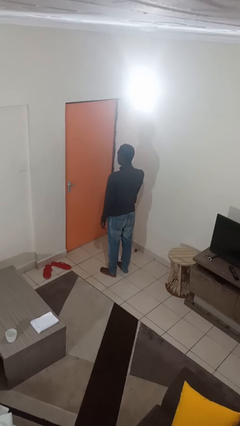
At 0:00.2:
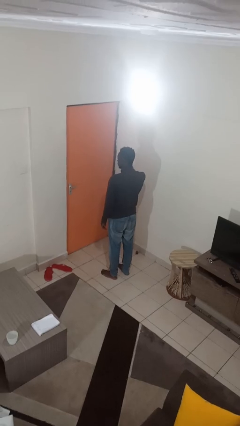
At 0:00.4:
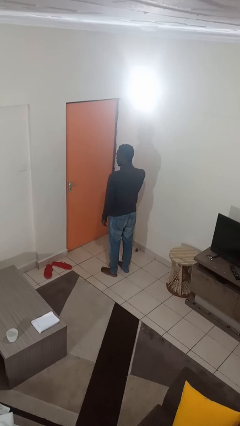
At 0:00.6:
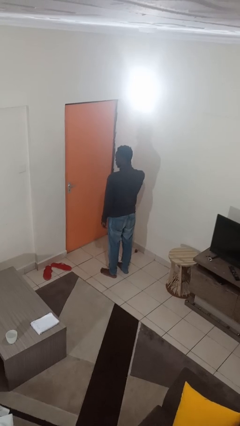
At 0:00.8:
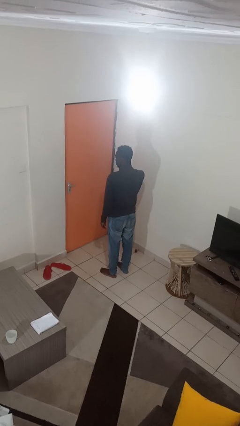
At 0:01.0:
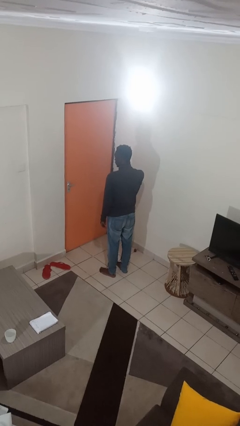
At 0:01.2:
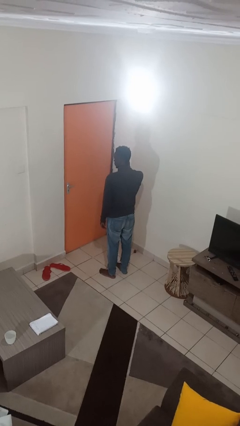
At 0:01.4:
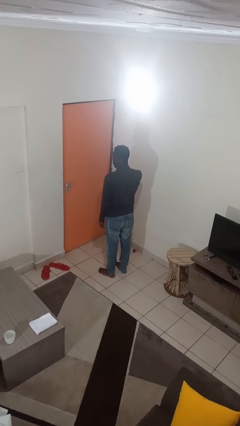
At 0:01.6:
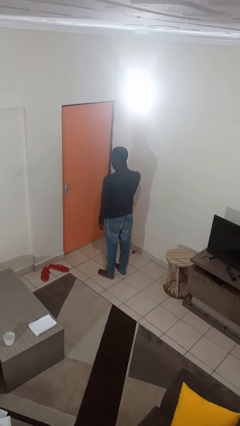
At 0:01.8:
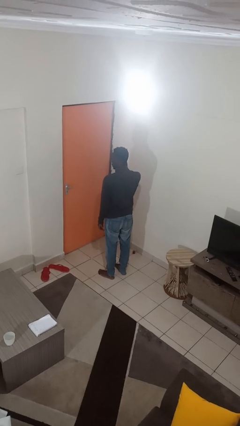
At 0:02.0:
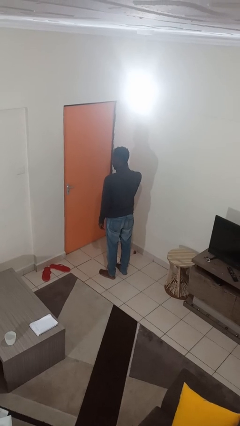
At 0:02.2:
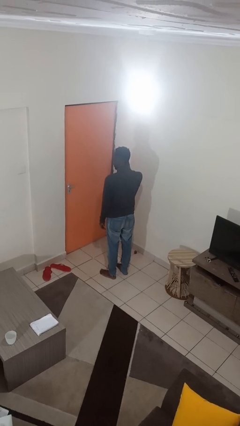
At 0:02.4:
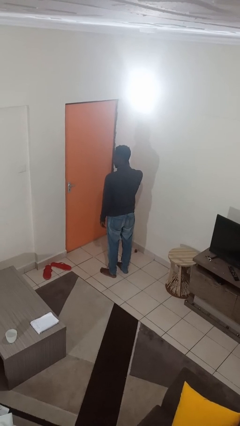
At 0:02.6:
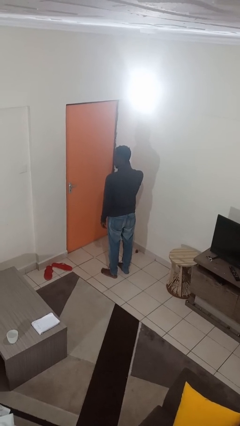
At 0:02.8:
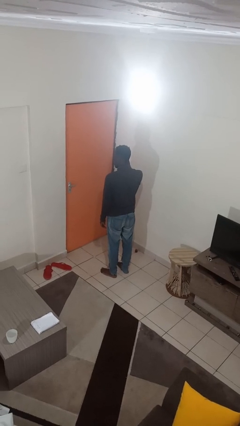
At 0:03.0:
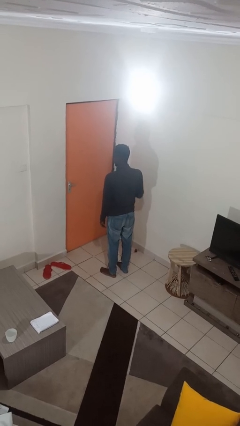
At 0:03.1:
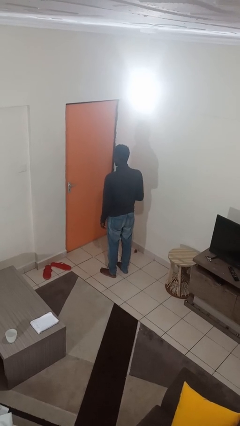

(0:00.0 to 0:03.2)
person touches earlobe

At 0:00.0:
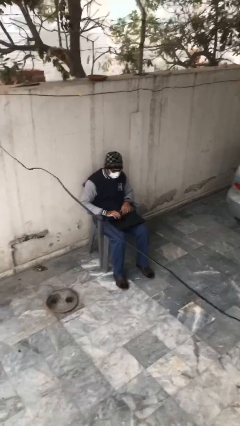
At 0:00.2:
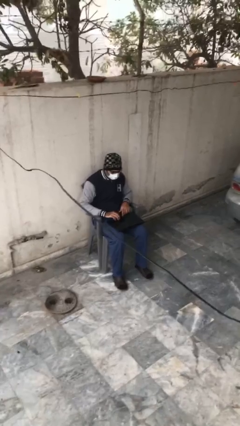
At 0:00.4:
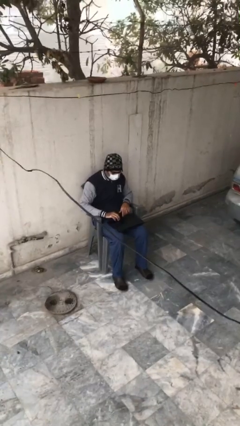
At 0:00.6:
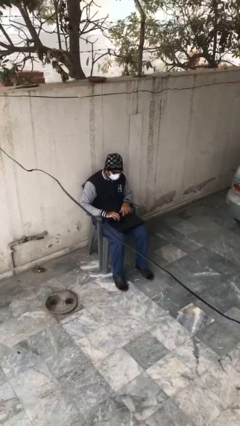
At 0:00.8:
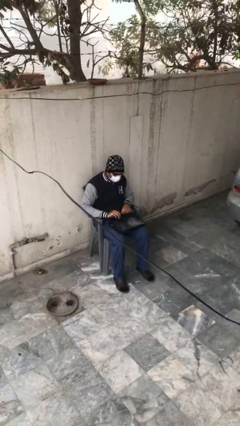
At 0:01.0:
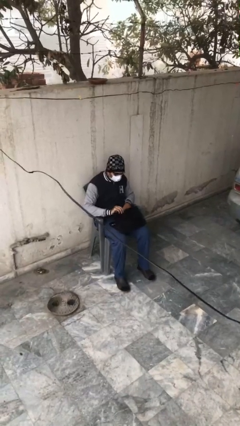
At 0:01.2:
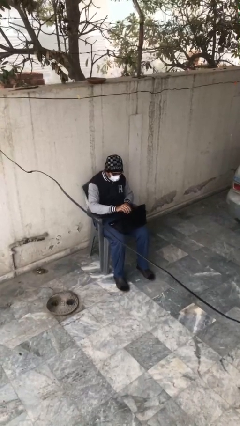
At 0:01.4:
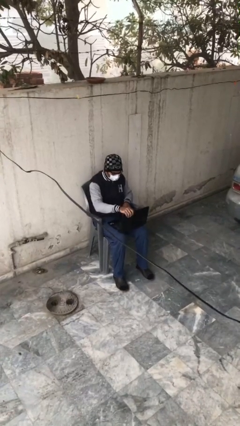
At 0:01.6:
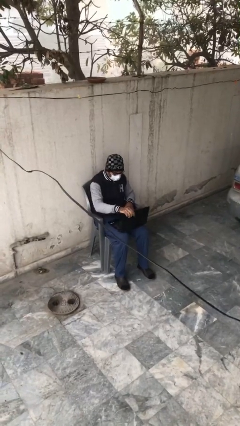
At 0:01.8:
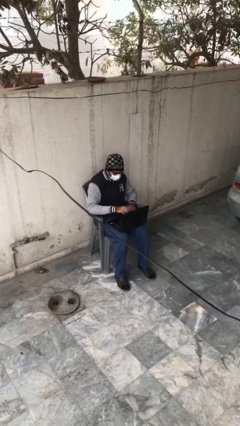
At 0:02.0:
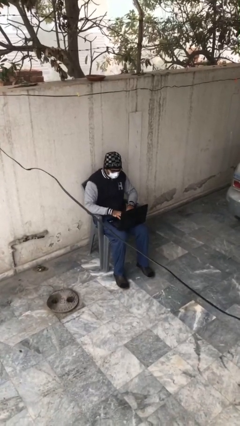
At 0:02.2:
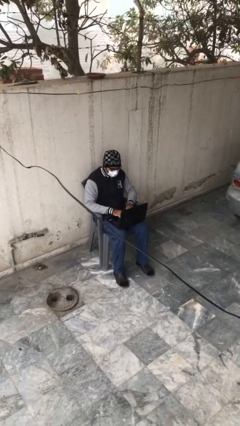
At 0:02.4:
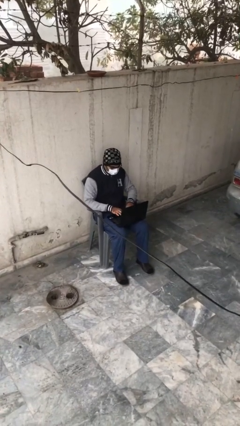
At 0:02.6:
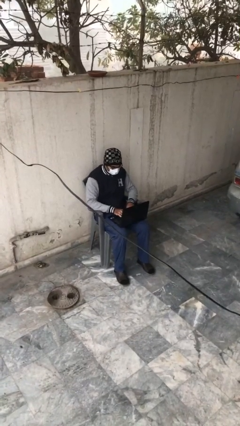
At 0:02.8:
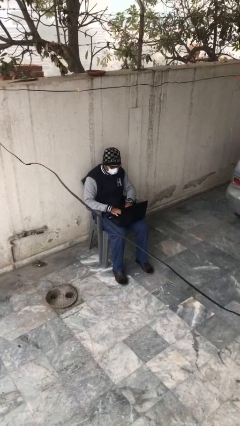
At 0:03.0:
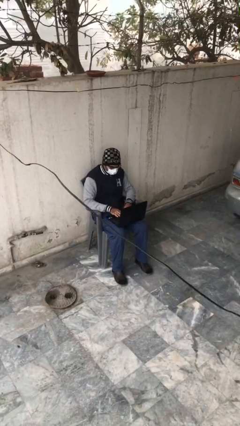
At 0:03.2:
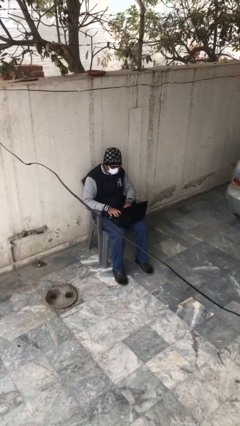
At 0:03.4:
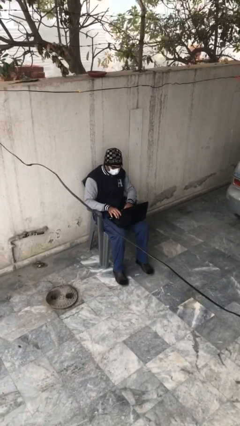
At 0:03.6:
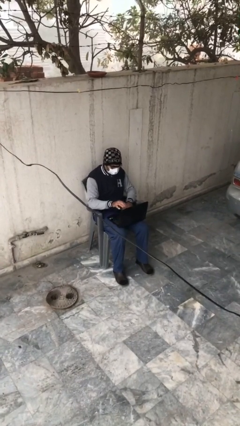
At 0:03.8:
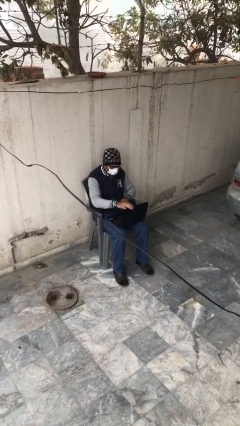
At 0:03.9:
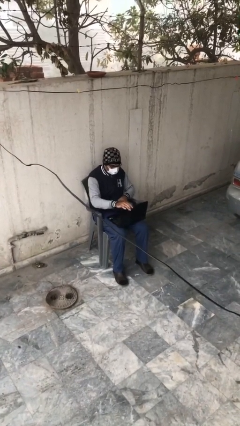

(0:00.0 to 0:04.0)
person interacts with laptop

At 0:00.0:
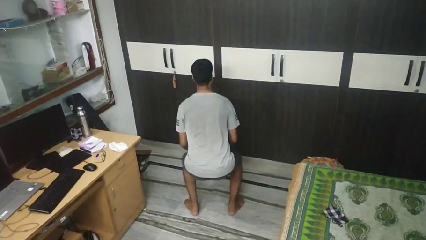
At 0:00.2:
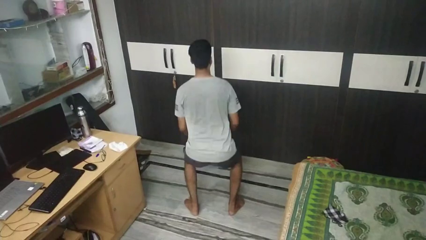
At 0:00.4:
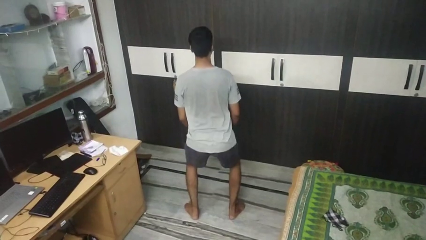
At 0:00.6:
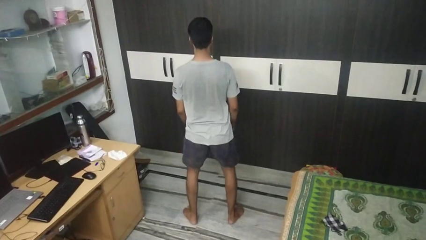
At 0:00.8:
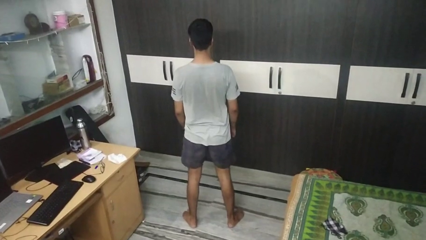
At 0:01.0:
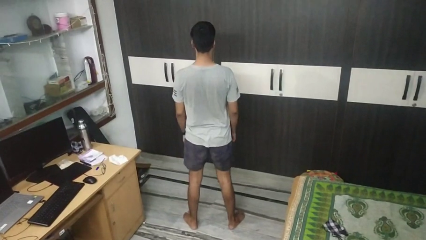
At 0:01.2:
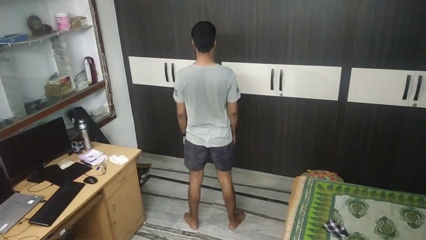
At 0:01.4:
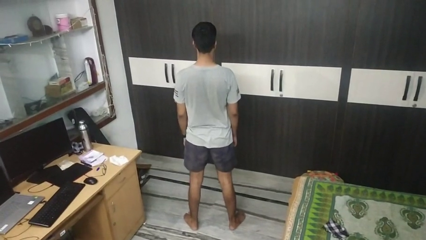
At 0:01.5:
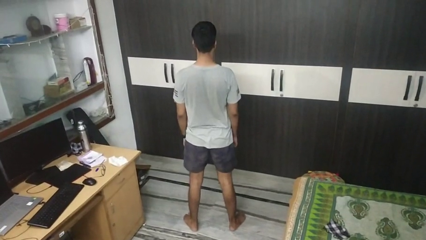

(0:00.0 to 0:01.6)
person stands up

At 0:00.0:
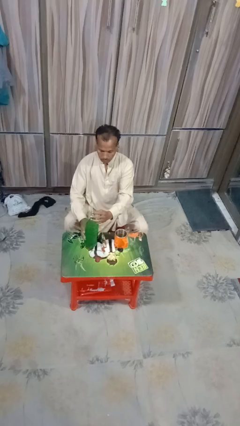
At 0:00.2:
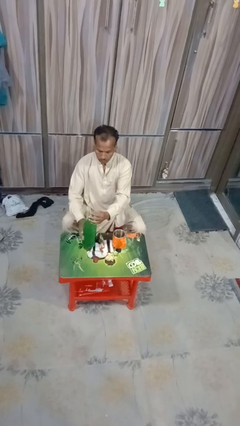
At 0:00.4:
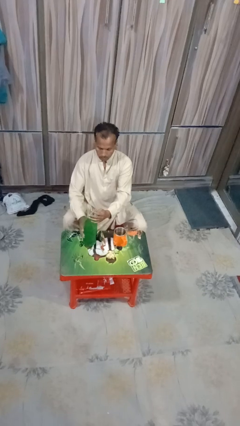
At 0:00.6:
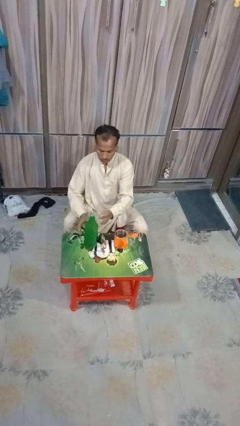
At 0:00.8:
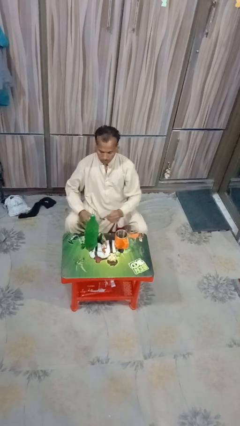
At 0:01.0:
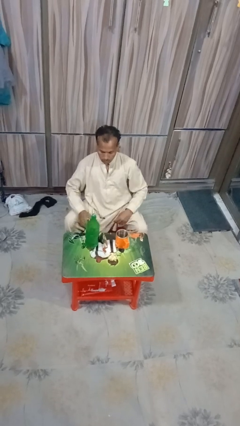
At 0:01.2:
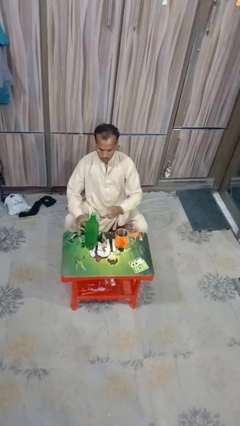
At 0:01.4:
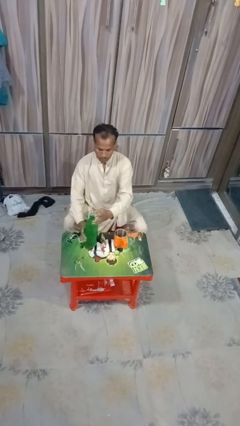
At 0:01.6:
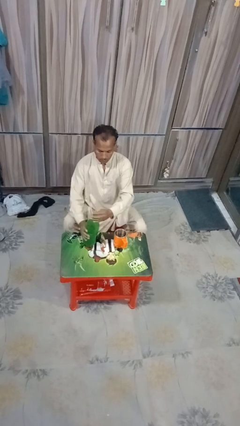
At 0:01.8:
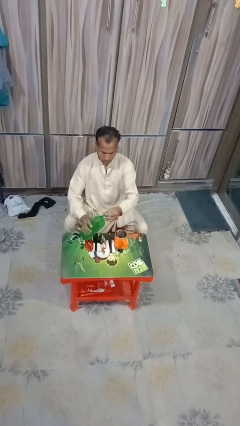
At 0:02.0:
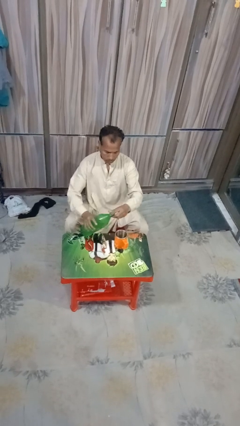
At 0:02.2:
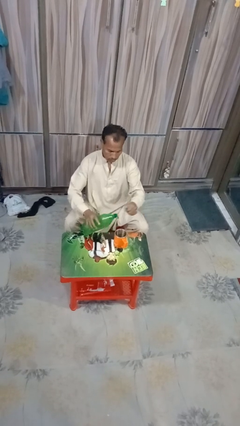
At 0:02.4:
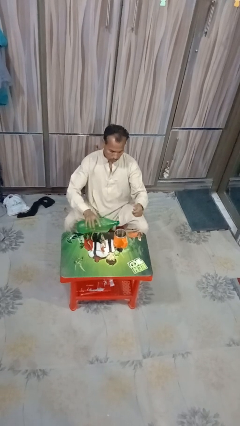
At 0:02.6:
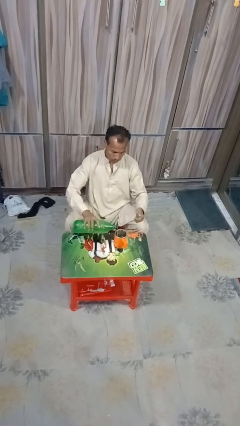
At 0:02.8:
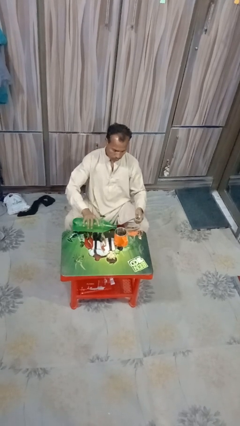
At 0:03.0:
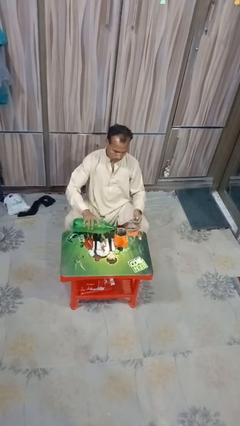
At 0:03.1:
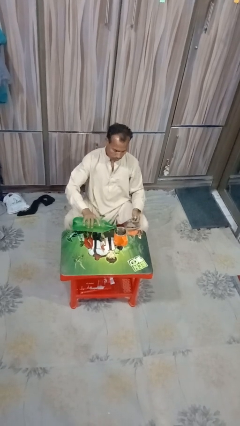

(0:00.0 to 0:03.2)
person pours liquid into cup

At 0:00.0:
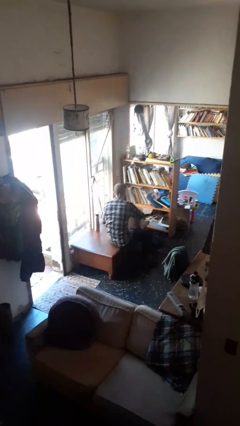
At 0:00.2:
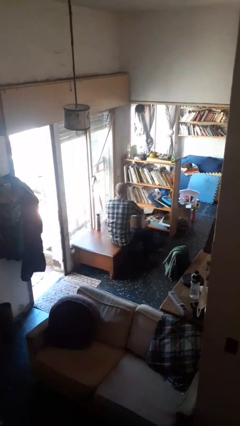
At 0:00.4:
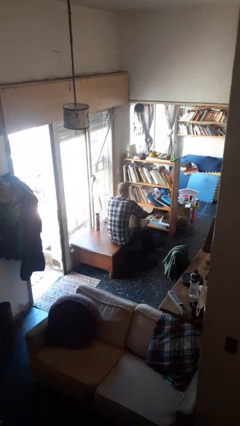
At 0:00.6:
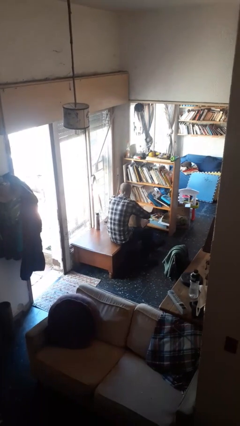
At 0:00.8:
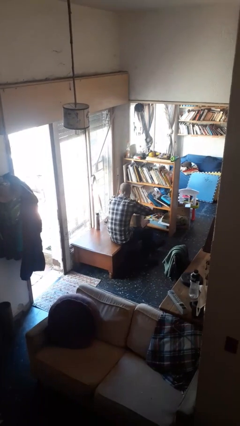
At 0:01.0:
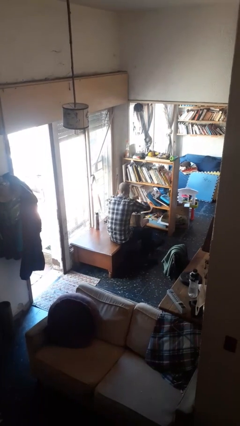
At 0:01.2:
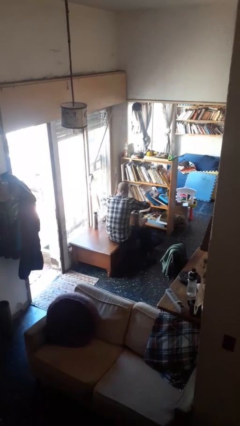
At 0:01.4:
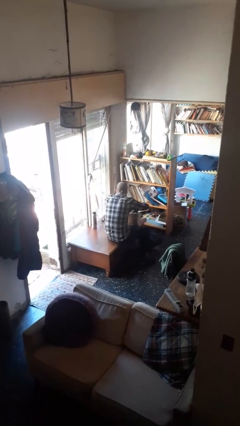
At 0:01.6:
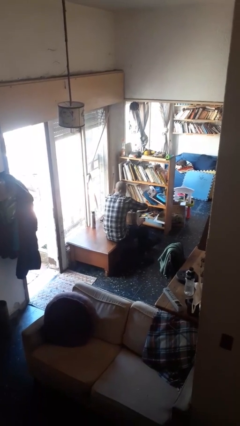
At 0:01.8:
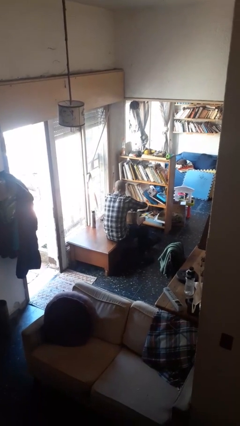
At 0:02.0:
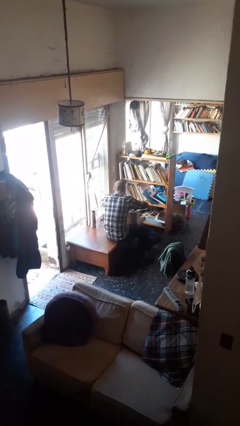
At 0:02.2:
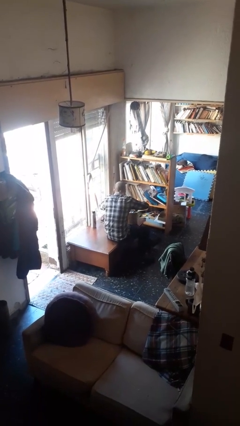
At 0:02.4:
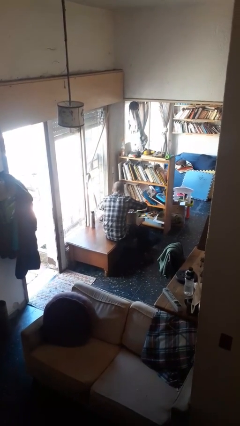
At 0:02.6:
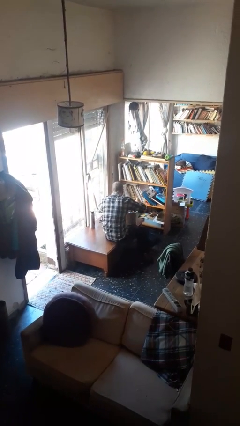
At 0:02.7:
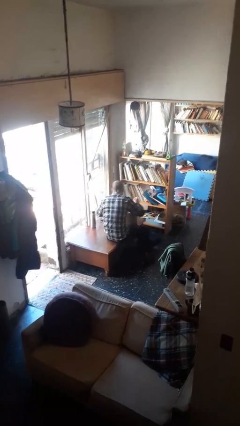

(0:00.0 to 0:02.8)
person searches in box

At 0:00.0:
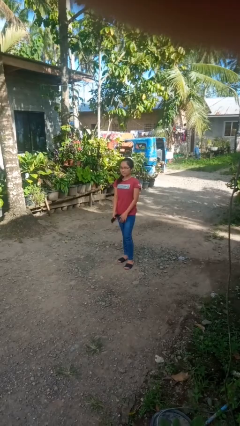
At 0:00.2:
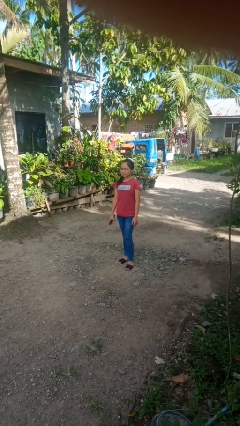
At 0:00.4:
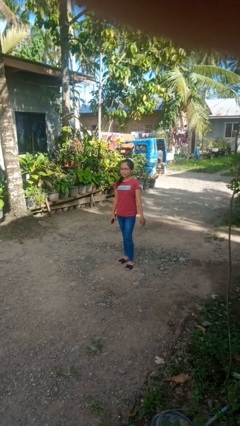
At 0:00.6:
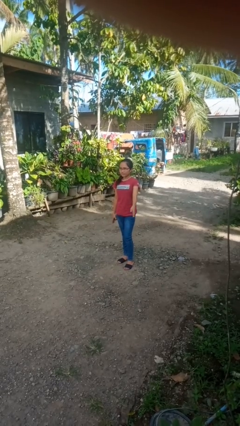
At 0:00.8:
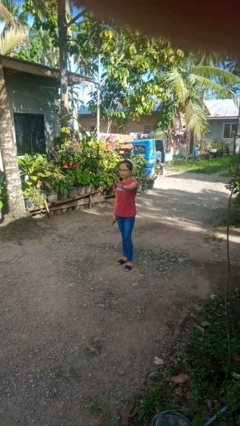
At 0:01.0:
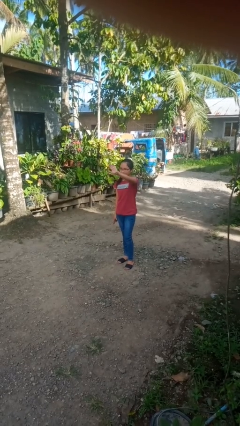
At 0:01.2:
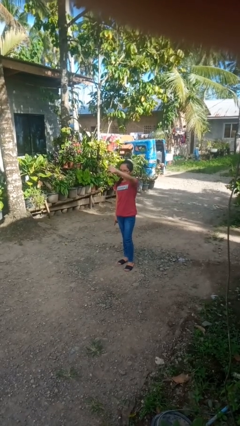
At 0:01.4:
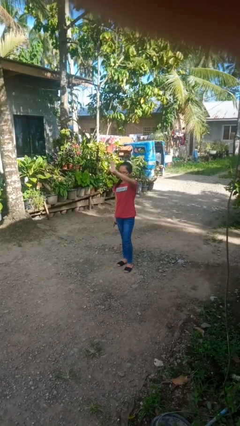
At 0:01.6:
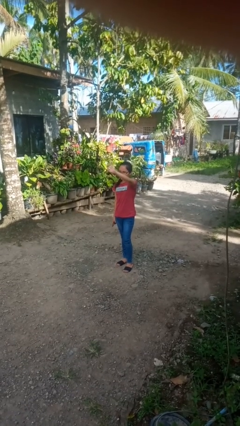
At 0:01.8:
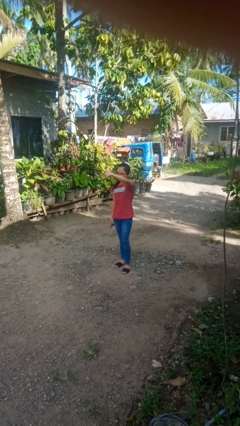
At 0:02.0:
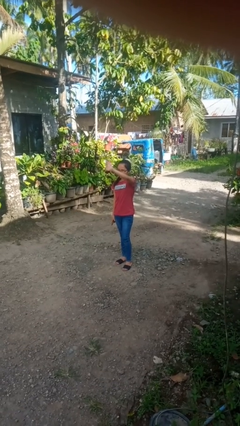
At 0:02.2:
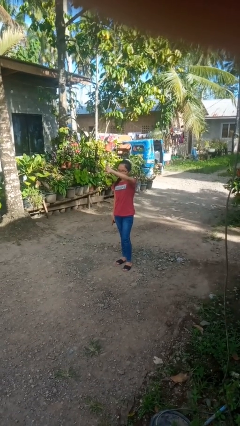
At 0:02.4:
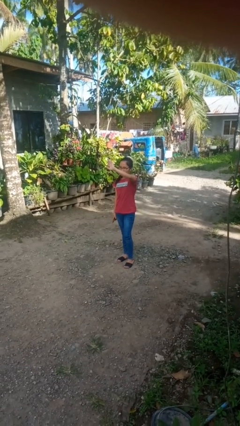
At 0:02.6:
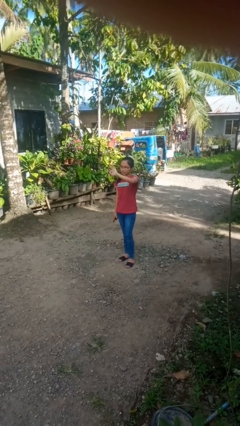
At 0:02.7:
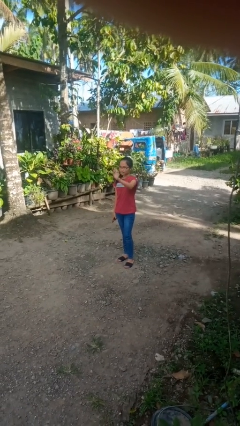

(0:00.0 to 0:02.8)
person waves at person
